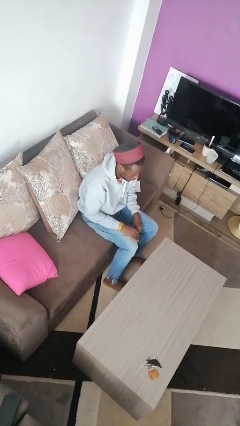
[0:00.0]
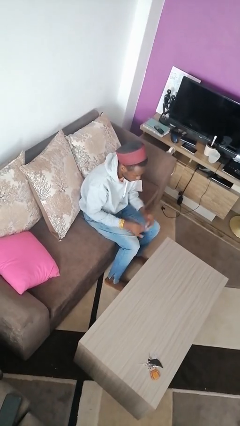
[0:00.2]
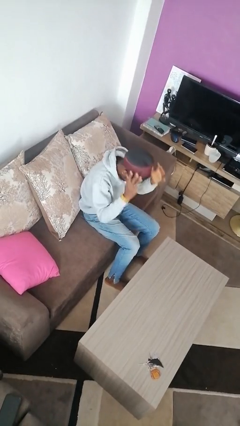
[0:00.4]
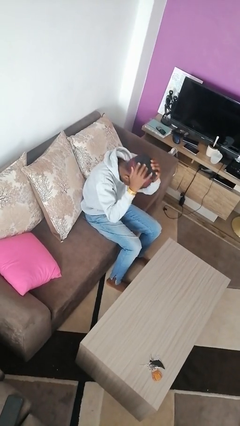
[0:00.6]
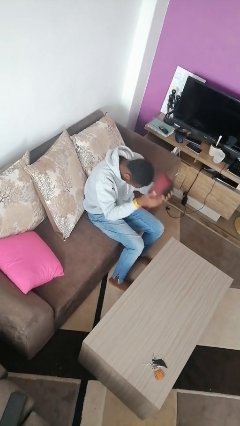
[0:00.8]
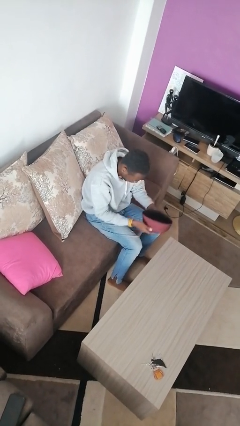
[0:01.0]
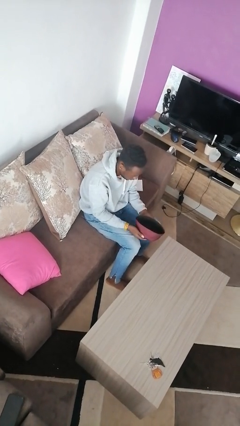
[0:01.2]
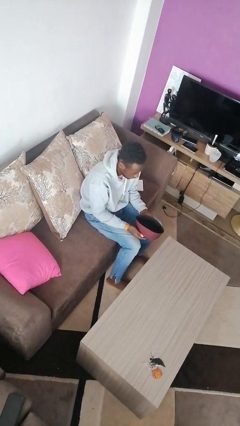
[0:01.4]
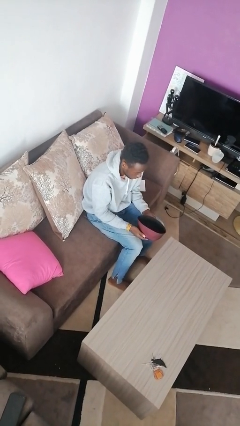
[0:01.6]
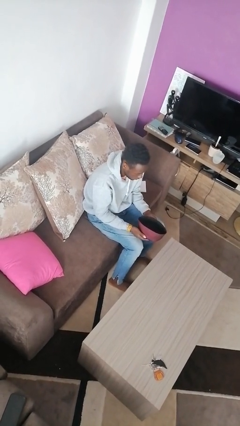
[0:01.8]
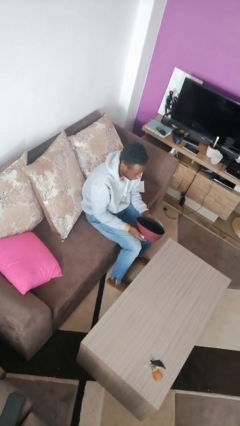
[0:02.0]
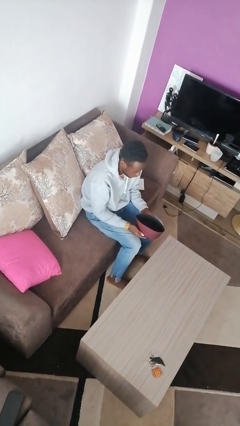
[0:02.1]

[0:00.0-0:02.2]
person takes off hat

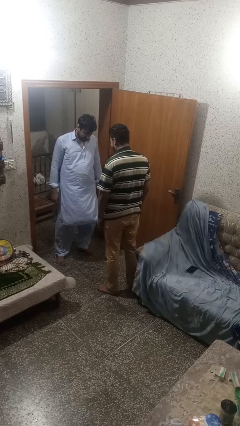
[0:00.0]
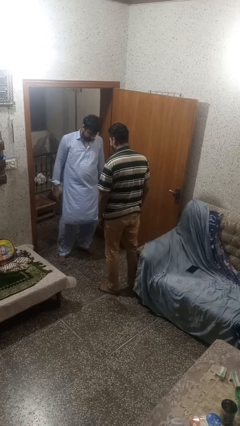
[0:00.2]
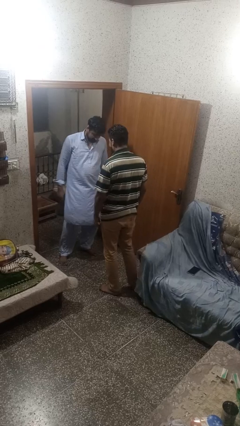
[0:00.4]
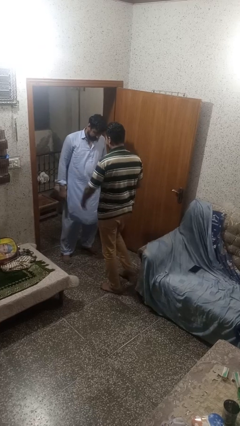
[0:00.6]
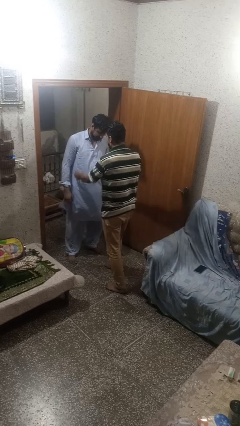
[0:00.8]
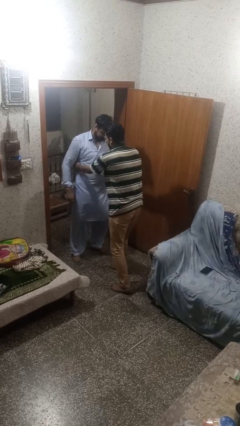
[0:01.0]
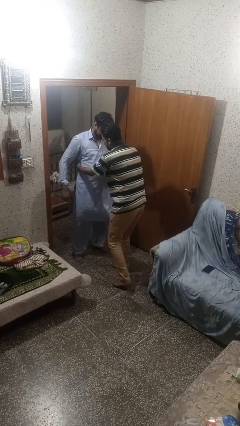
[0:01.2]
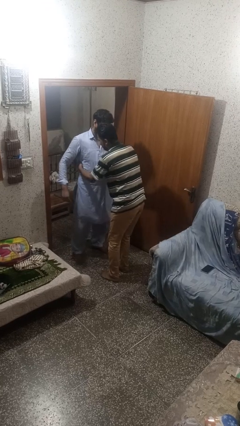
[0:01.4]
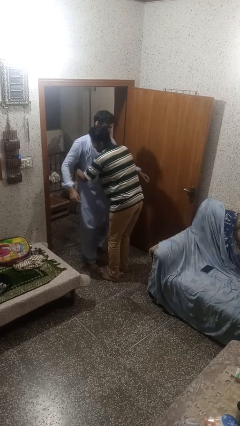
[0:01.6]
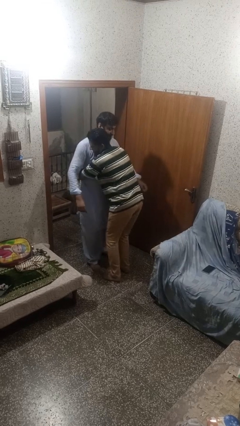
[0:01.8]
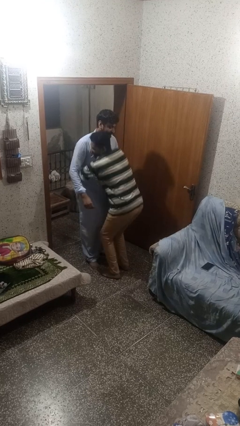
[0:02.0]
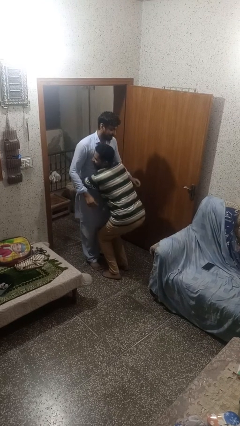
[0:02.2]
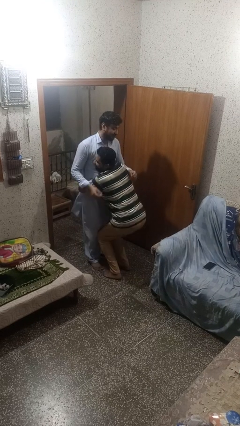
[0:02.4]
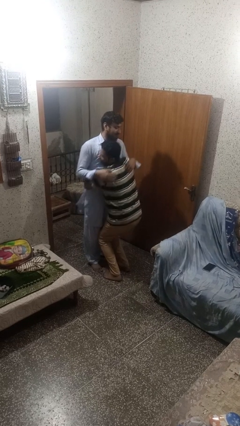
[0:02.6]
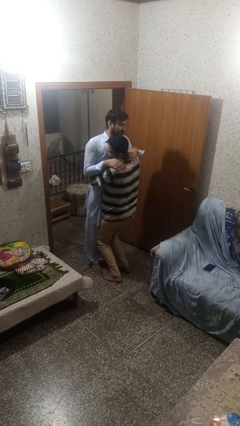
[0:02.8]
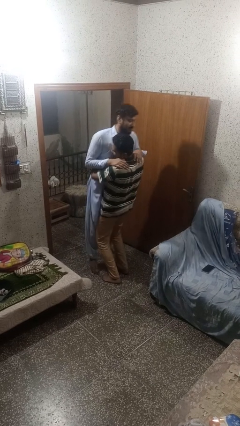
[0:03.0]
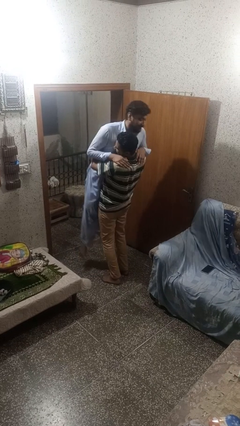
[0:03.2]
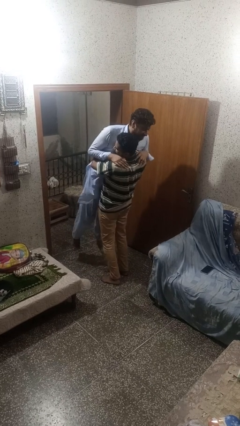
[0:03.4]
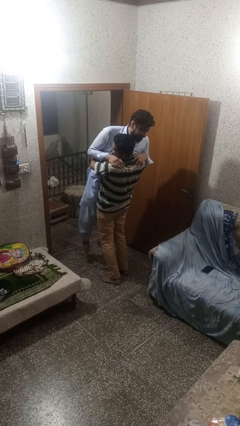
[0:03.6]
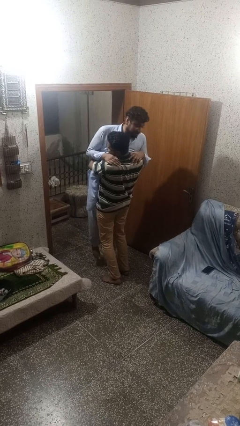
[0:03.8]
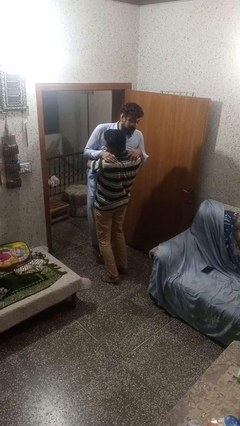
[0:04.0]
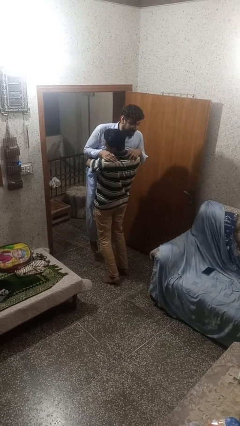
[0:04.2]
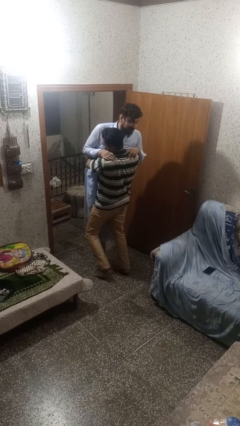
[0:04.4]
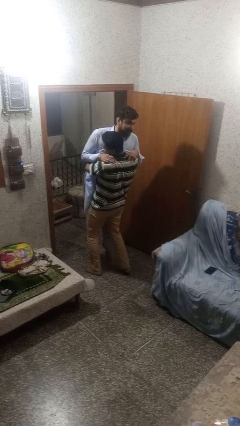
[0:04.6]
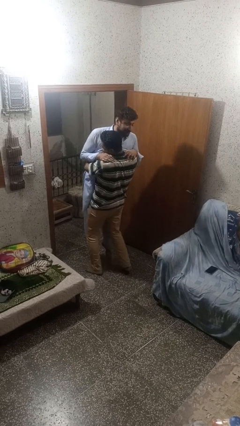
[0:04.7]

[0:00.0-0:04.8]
person picks up person

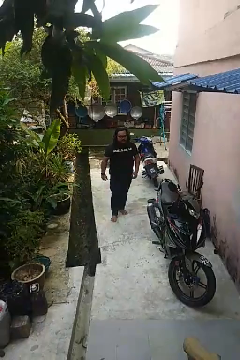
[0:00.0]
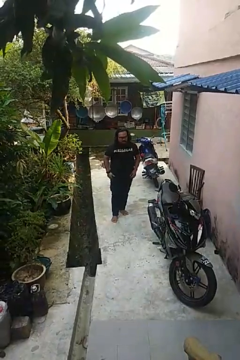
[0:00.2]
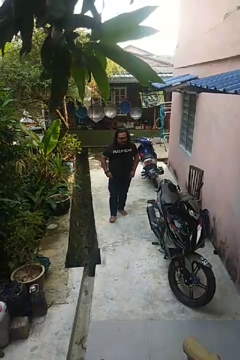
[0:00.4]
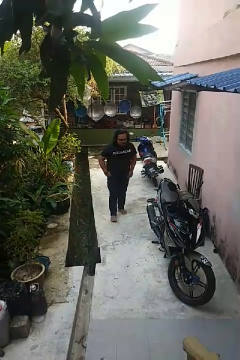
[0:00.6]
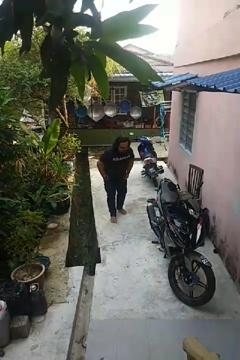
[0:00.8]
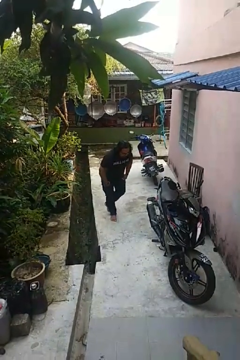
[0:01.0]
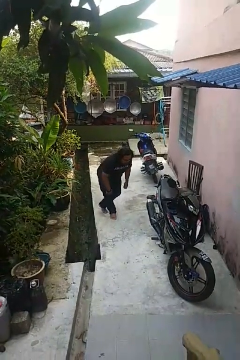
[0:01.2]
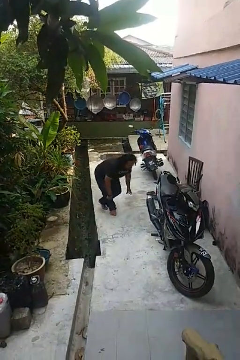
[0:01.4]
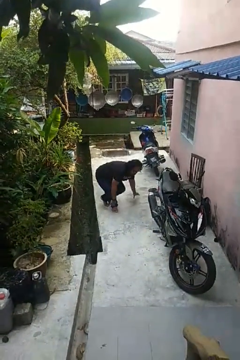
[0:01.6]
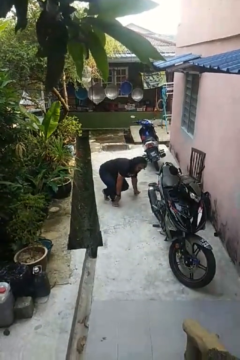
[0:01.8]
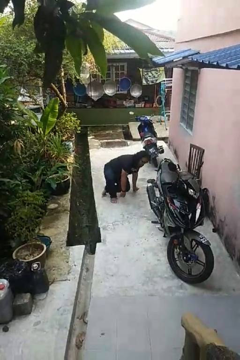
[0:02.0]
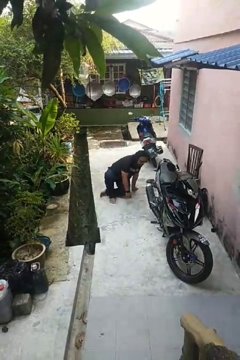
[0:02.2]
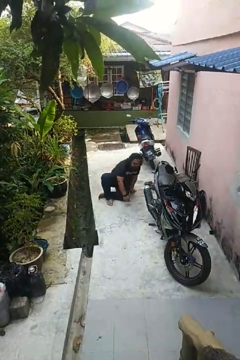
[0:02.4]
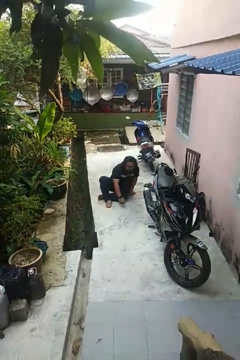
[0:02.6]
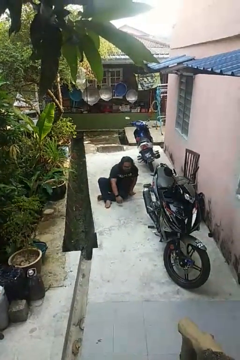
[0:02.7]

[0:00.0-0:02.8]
person sits crisscross

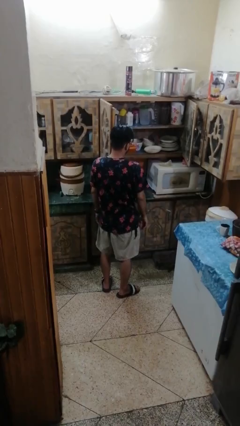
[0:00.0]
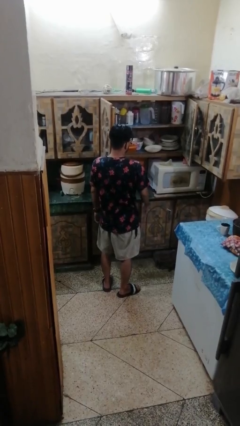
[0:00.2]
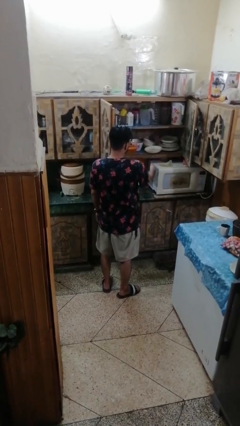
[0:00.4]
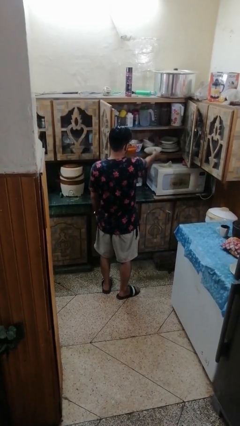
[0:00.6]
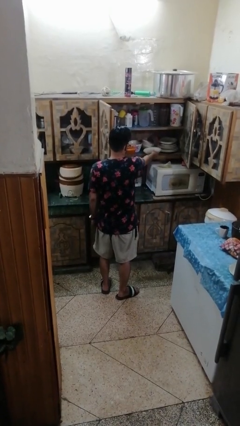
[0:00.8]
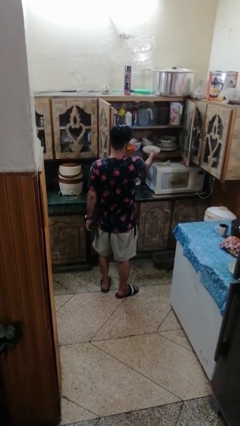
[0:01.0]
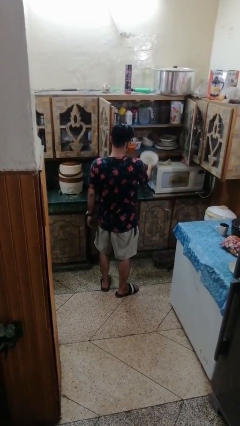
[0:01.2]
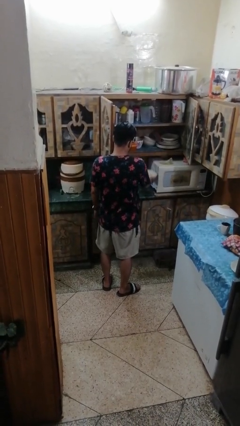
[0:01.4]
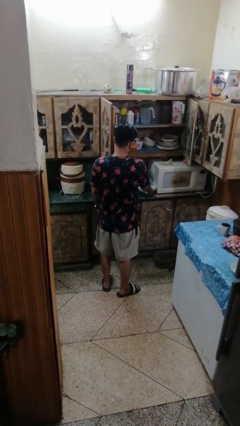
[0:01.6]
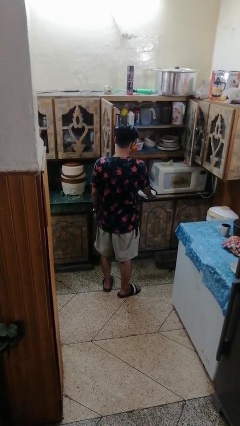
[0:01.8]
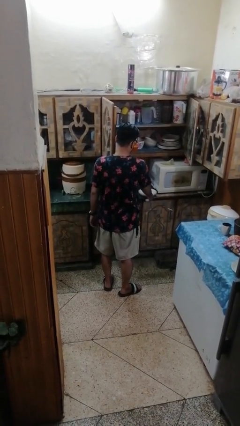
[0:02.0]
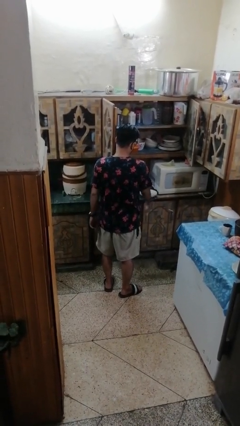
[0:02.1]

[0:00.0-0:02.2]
person takes object from cabinet

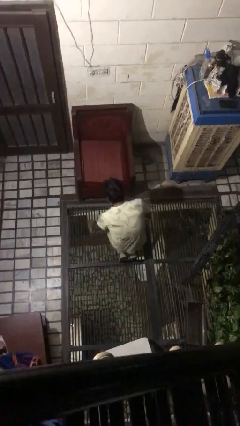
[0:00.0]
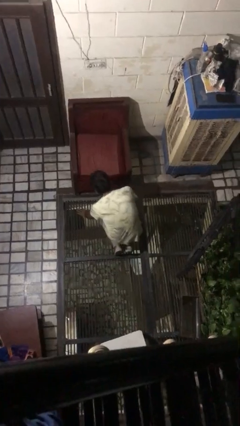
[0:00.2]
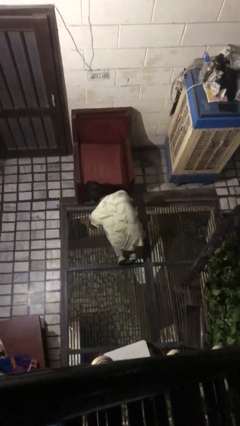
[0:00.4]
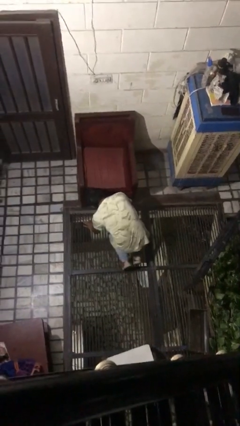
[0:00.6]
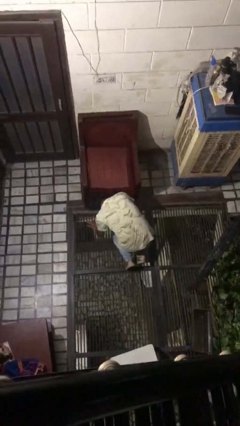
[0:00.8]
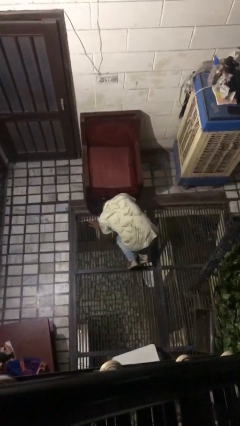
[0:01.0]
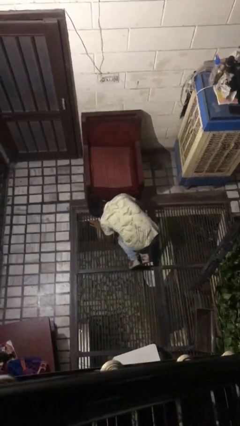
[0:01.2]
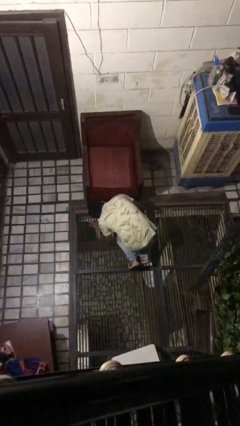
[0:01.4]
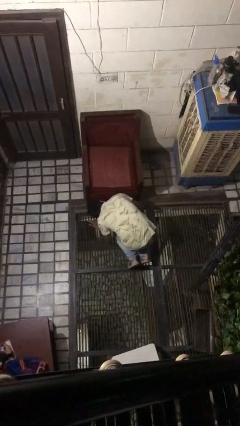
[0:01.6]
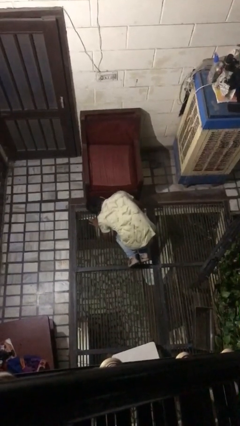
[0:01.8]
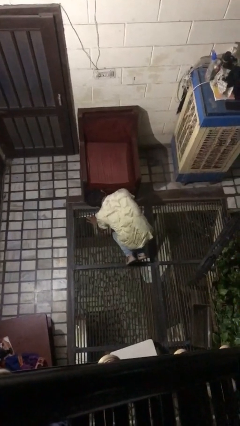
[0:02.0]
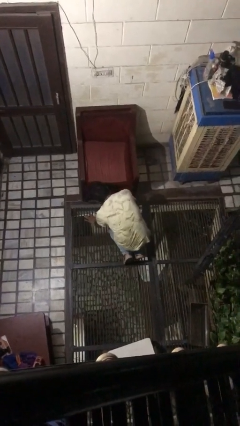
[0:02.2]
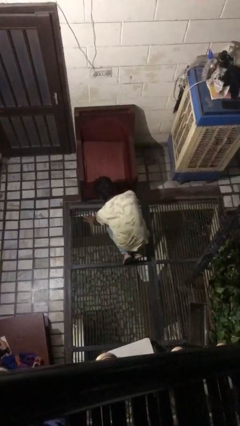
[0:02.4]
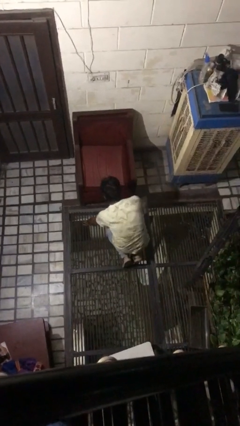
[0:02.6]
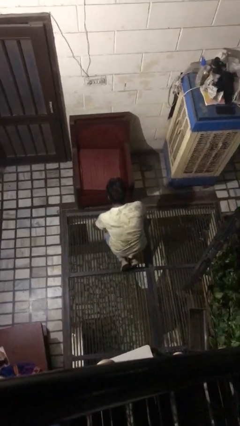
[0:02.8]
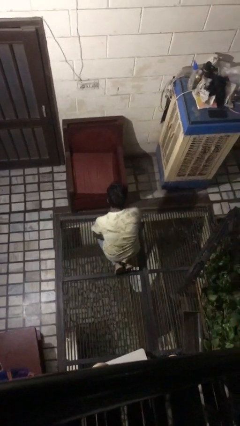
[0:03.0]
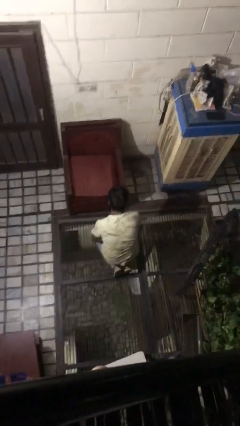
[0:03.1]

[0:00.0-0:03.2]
person searches under couch

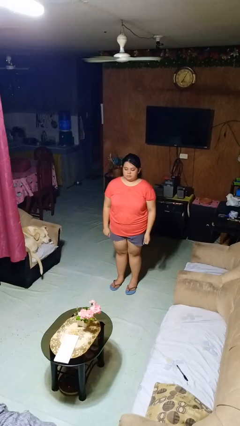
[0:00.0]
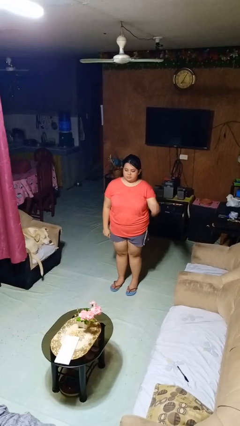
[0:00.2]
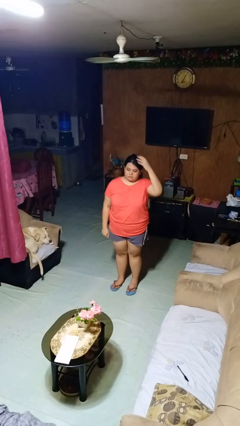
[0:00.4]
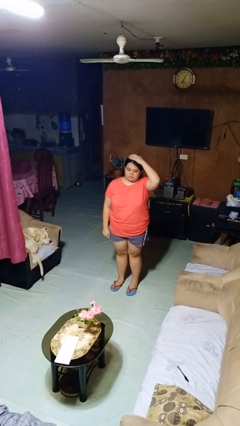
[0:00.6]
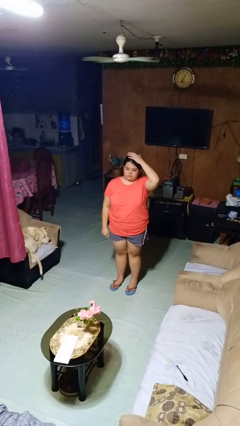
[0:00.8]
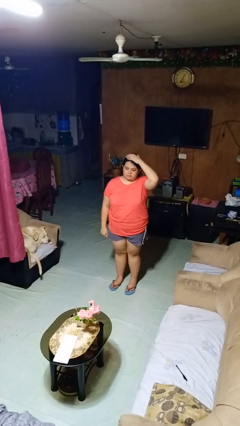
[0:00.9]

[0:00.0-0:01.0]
person pats head

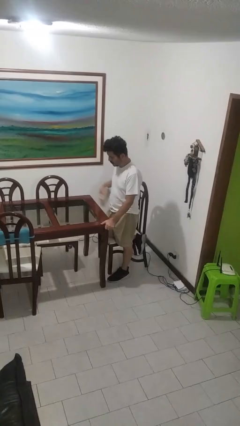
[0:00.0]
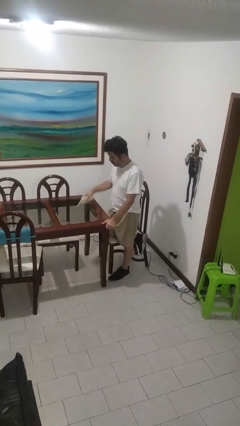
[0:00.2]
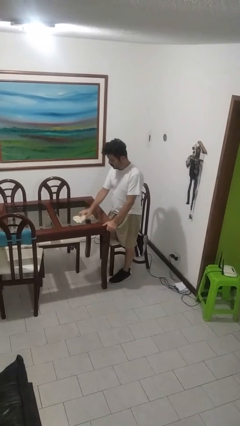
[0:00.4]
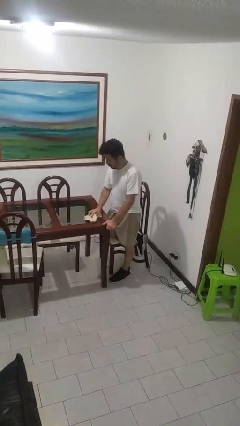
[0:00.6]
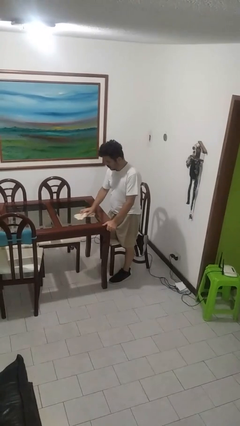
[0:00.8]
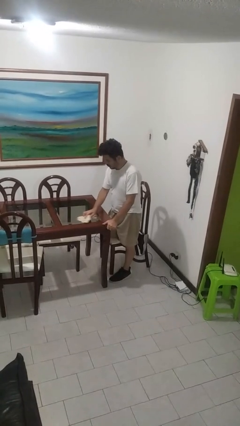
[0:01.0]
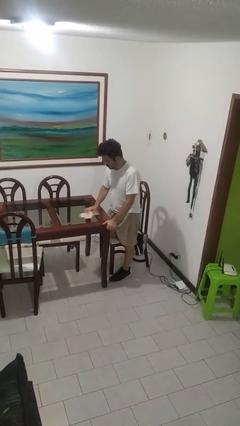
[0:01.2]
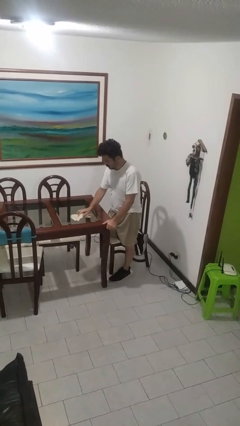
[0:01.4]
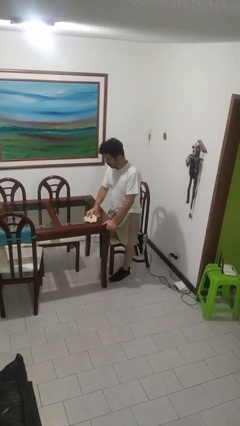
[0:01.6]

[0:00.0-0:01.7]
person cleans table with rag
